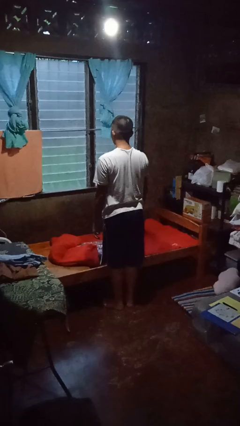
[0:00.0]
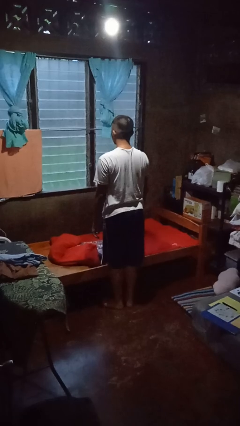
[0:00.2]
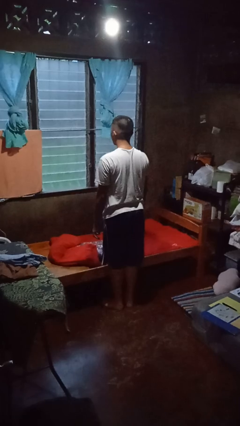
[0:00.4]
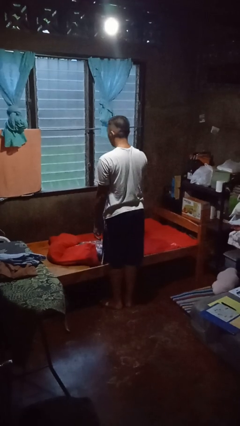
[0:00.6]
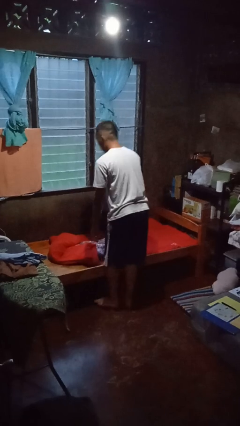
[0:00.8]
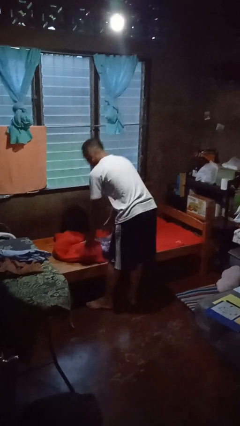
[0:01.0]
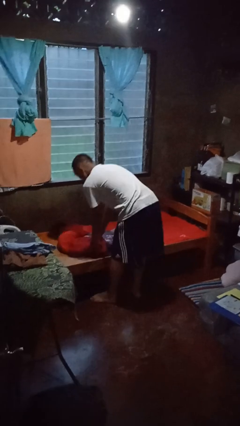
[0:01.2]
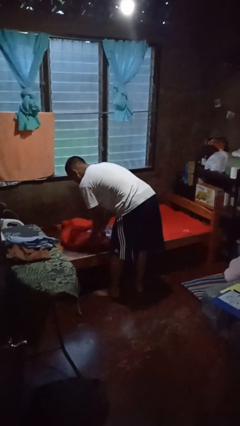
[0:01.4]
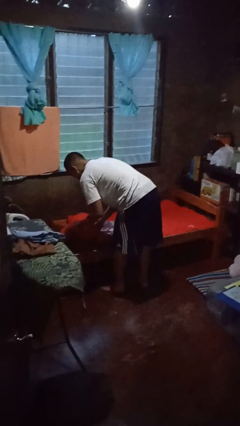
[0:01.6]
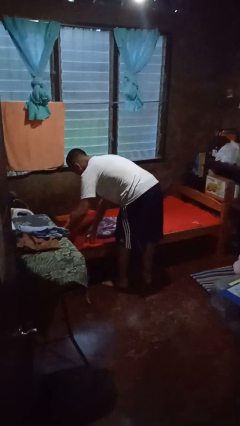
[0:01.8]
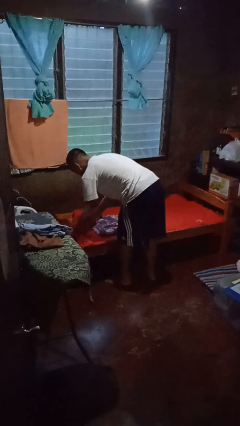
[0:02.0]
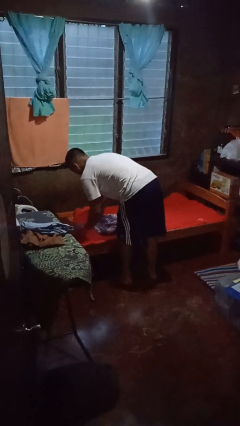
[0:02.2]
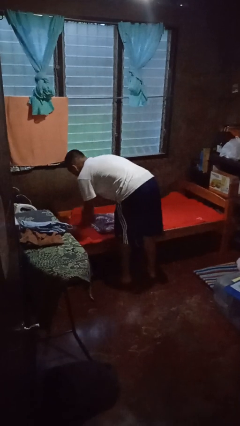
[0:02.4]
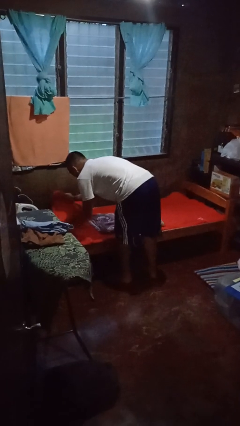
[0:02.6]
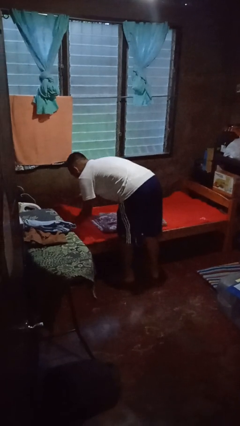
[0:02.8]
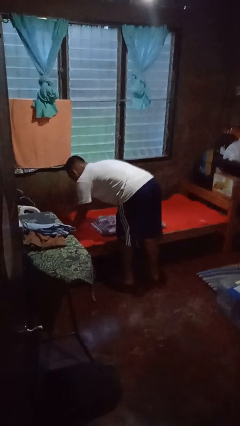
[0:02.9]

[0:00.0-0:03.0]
person makes bed

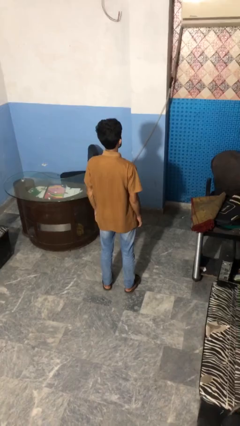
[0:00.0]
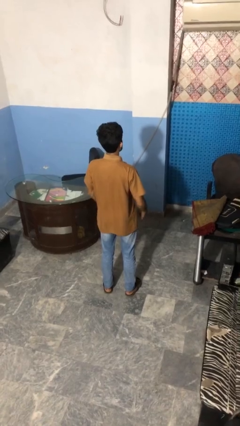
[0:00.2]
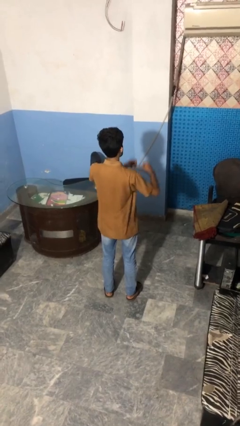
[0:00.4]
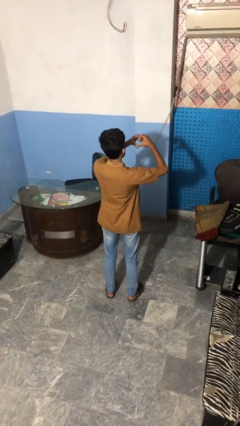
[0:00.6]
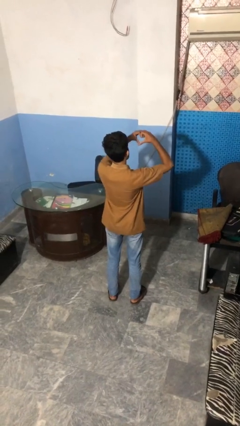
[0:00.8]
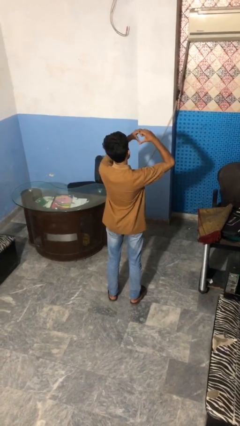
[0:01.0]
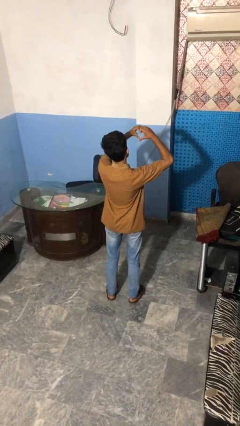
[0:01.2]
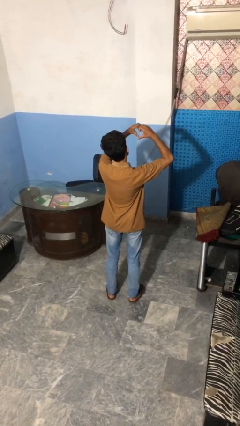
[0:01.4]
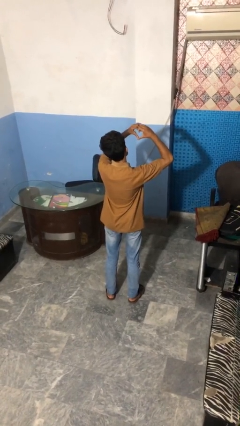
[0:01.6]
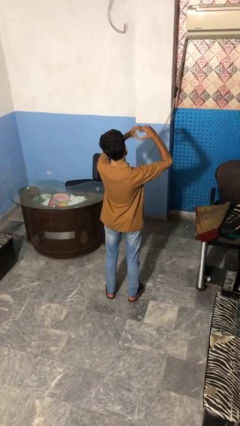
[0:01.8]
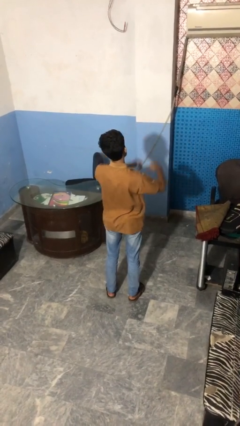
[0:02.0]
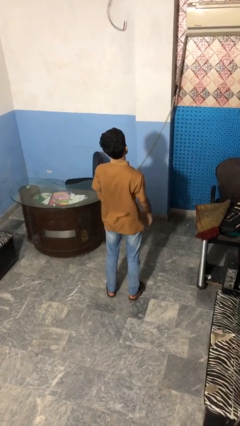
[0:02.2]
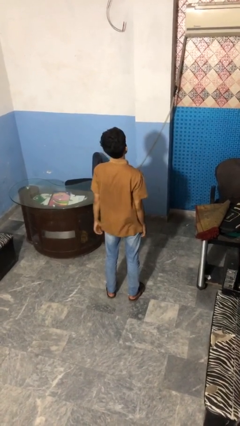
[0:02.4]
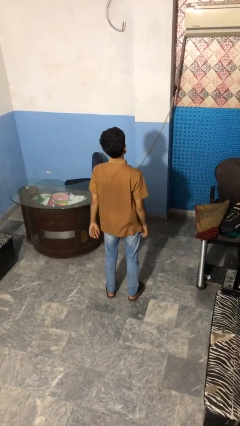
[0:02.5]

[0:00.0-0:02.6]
person gestures heart

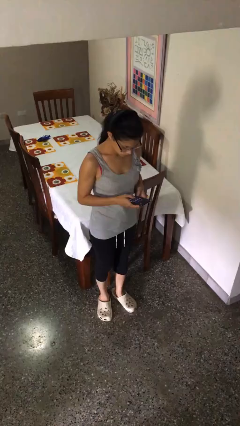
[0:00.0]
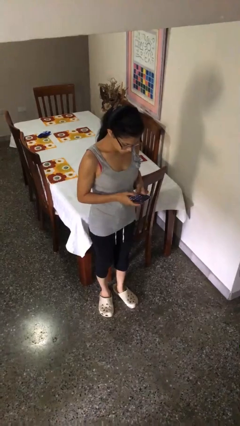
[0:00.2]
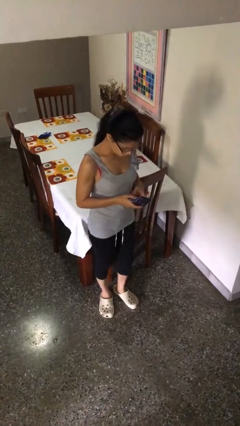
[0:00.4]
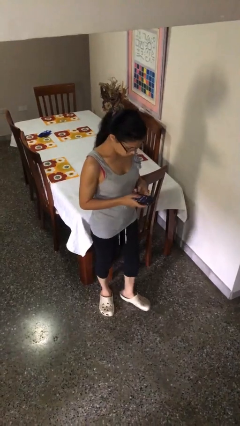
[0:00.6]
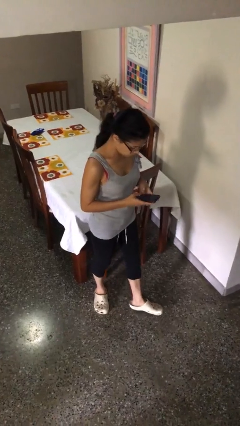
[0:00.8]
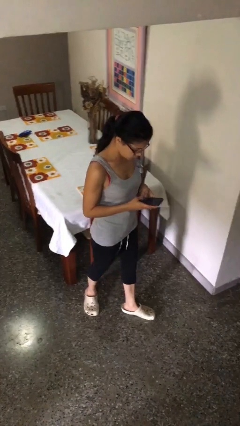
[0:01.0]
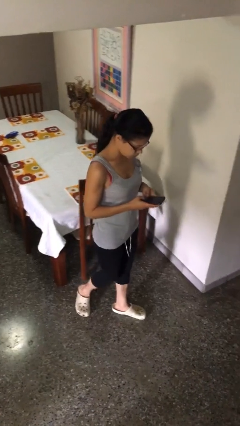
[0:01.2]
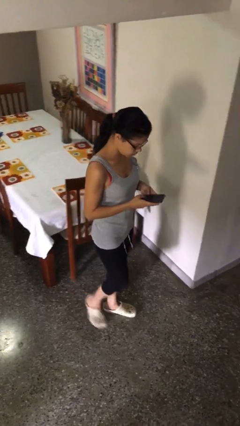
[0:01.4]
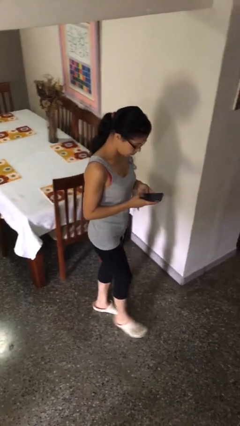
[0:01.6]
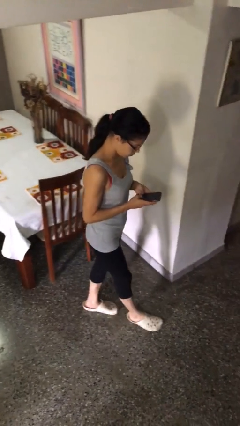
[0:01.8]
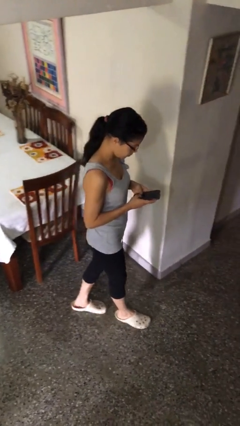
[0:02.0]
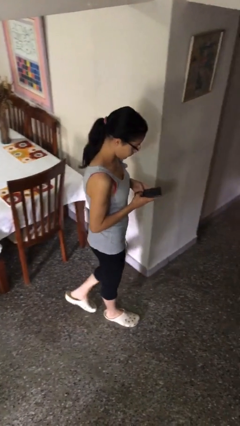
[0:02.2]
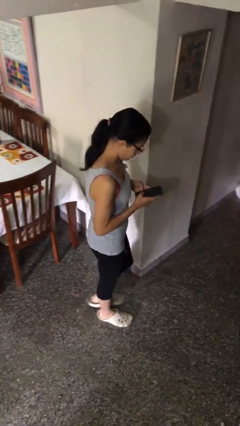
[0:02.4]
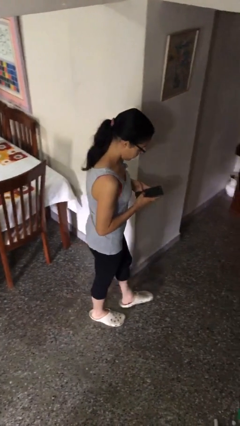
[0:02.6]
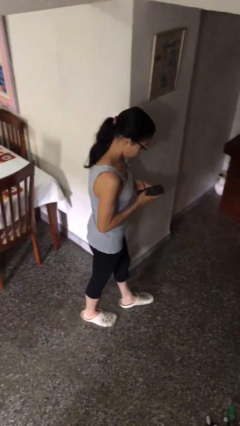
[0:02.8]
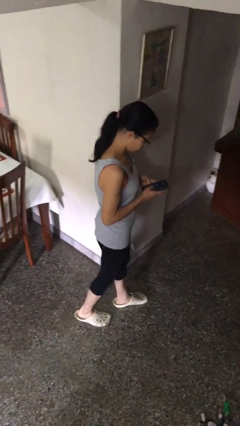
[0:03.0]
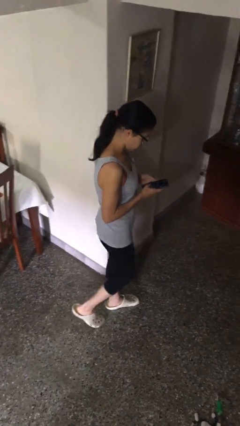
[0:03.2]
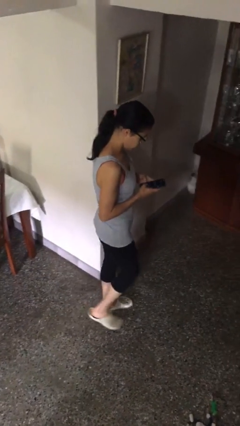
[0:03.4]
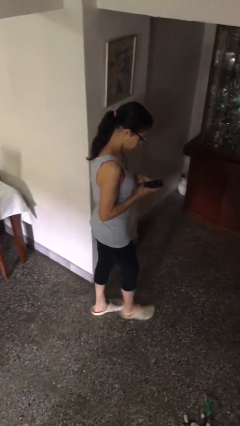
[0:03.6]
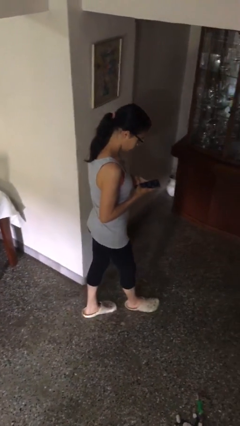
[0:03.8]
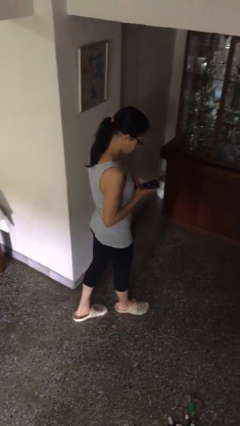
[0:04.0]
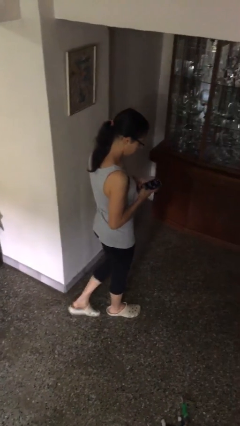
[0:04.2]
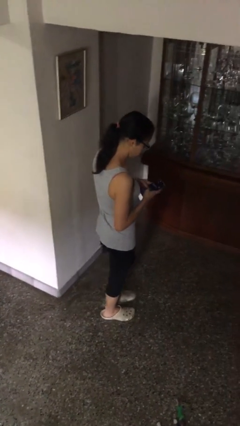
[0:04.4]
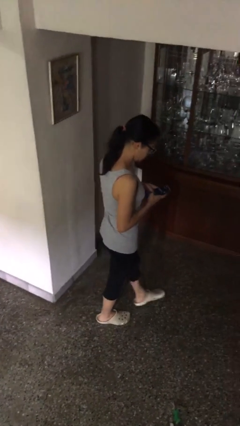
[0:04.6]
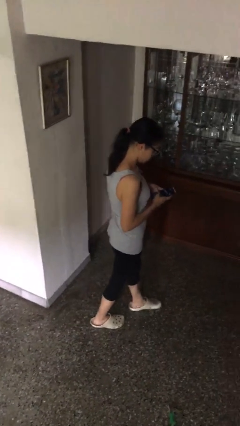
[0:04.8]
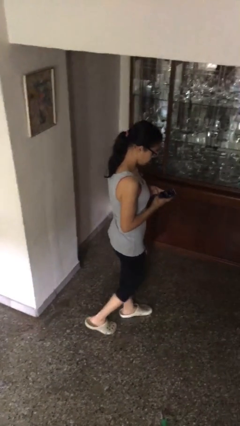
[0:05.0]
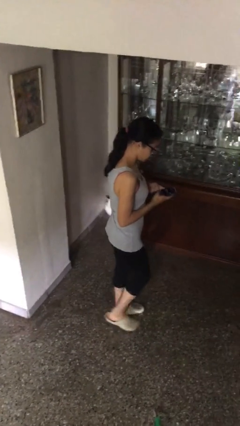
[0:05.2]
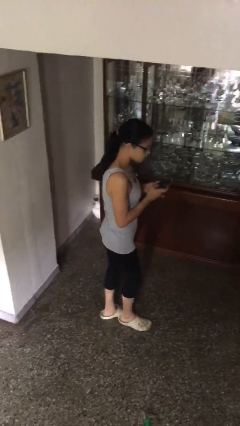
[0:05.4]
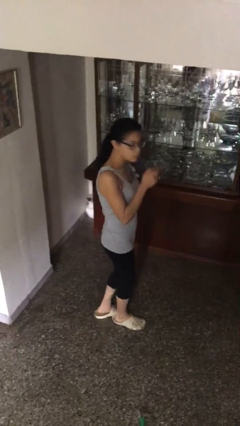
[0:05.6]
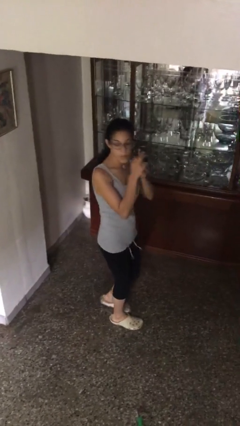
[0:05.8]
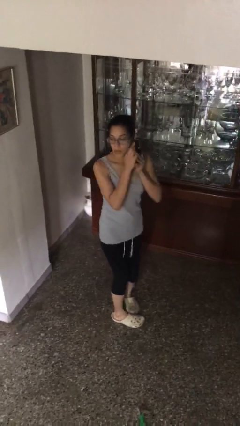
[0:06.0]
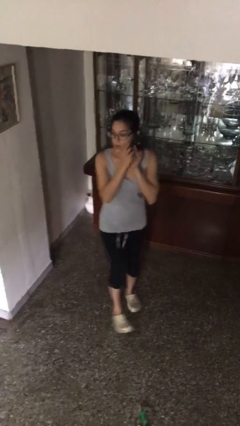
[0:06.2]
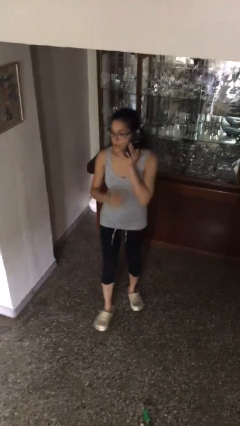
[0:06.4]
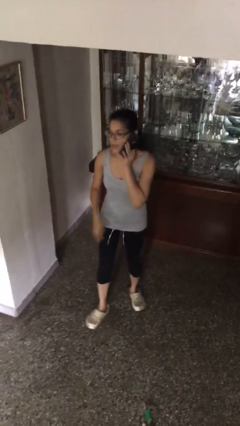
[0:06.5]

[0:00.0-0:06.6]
person texts on phone

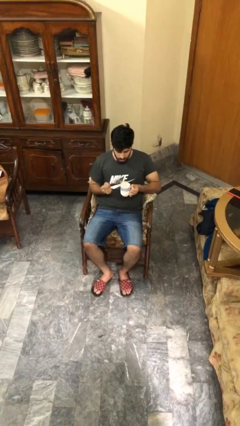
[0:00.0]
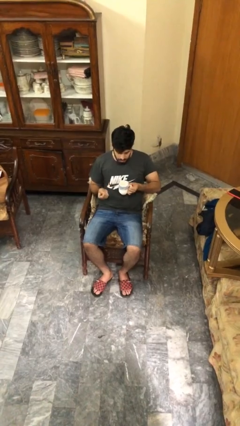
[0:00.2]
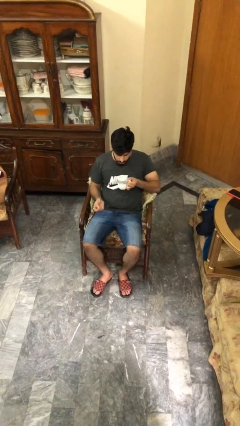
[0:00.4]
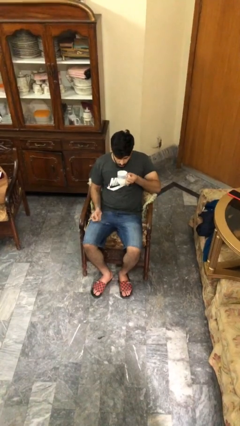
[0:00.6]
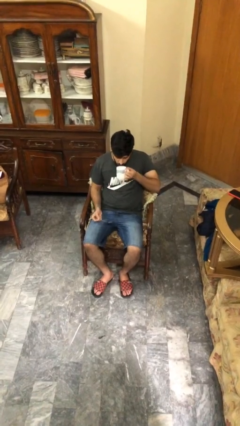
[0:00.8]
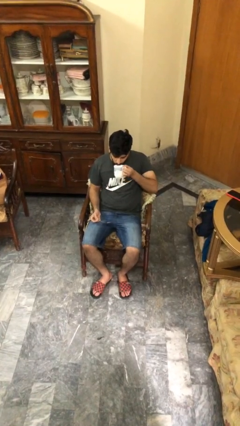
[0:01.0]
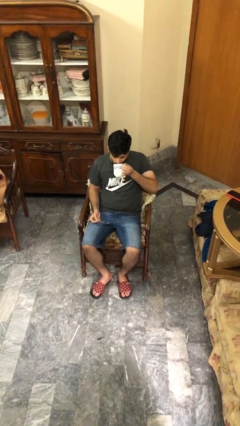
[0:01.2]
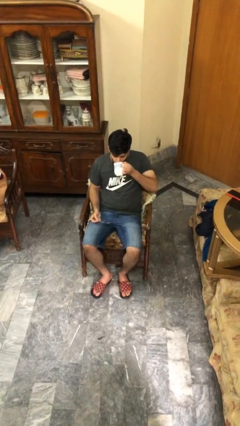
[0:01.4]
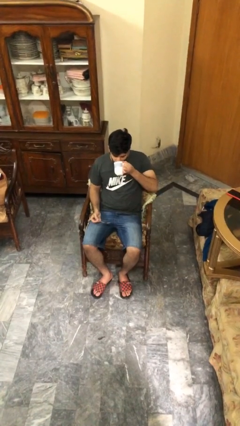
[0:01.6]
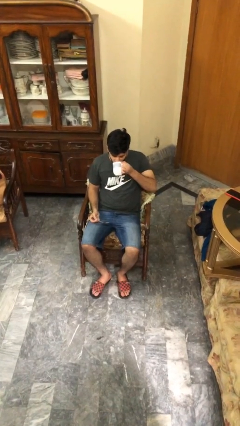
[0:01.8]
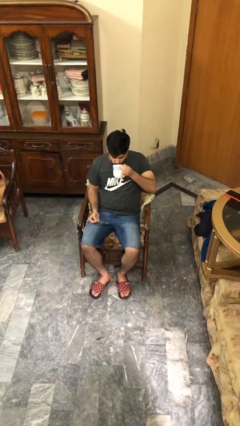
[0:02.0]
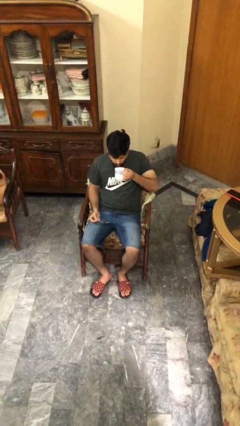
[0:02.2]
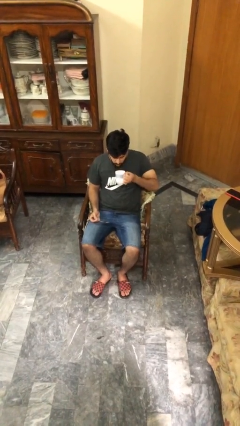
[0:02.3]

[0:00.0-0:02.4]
person drinks from mug

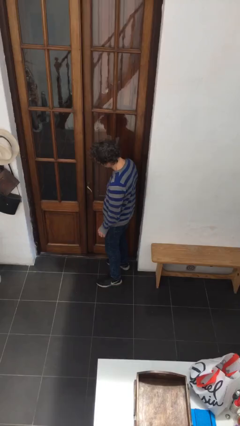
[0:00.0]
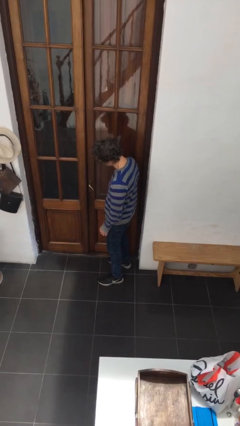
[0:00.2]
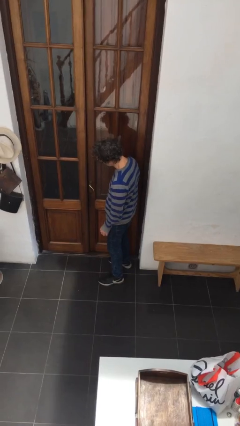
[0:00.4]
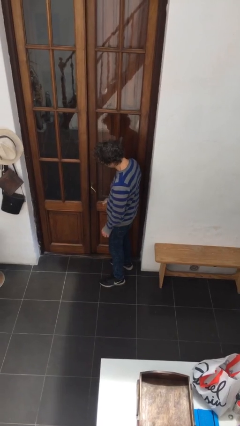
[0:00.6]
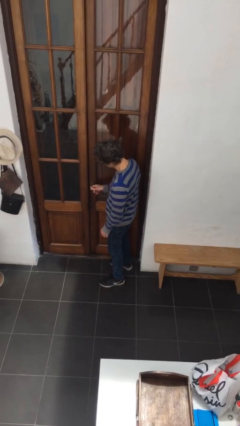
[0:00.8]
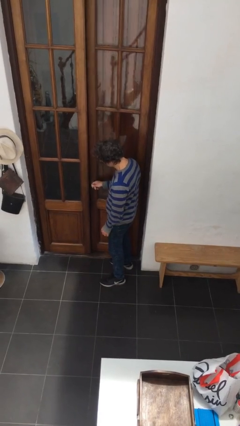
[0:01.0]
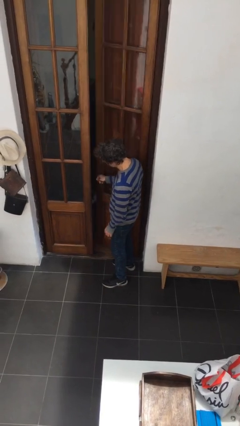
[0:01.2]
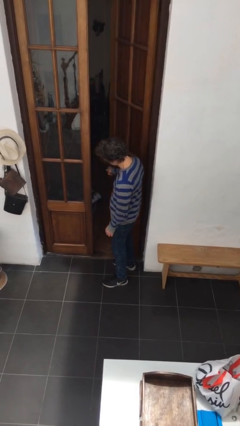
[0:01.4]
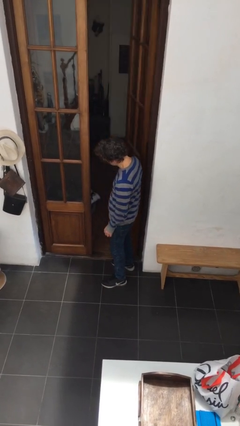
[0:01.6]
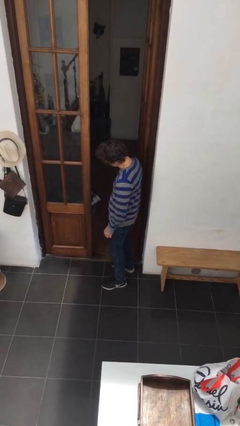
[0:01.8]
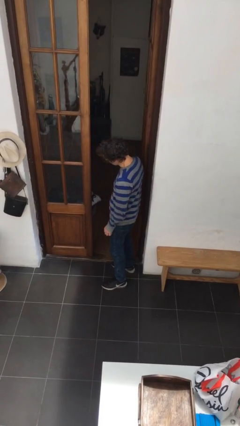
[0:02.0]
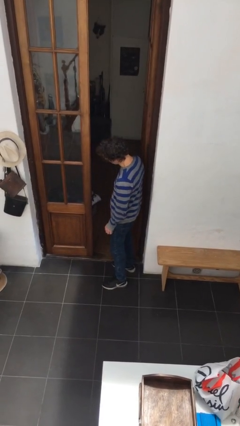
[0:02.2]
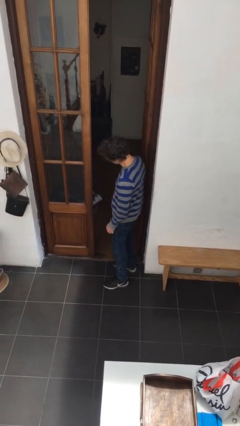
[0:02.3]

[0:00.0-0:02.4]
person opens facility door

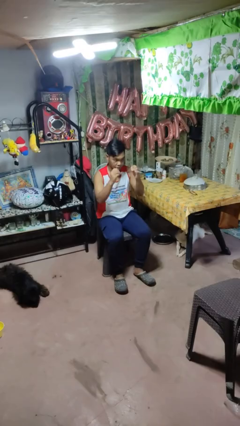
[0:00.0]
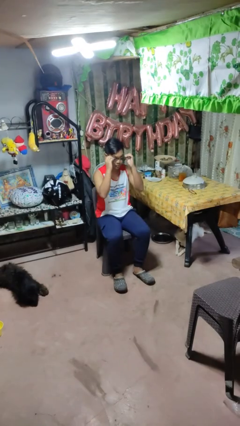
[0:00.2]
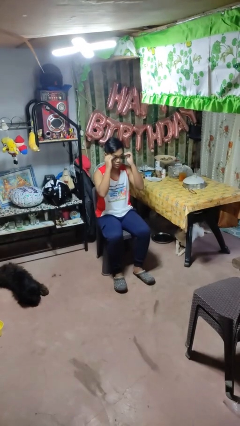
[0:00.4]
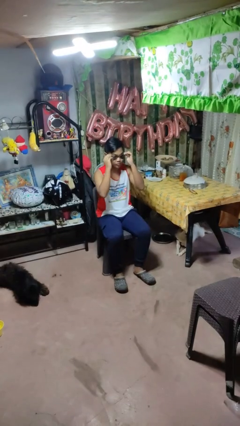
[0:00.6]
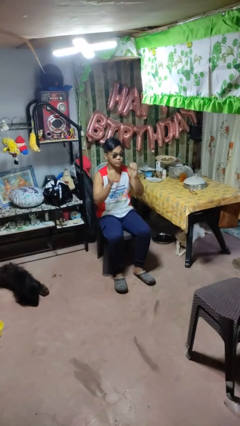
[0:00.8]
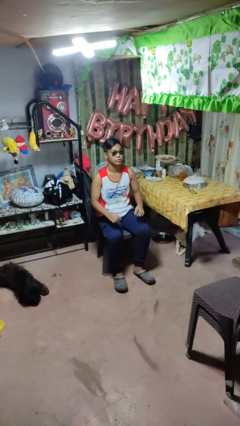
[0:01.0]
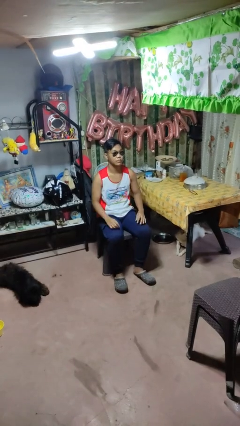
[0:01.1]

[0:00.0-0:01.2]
person puts on sunglasses
